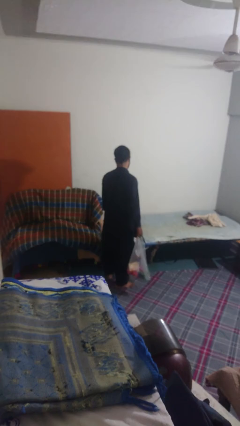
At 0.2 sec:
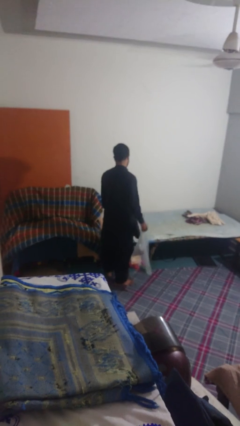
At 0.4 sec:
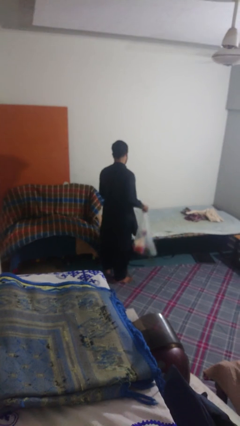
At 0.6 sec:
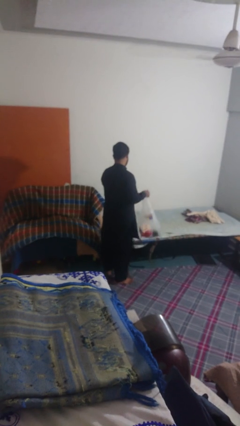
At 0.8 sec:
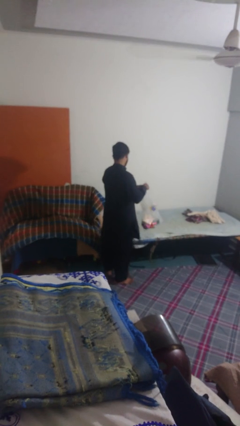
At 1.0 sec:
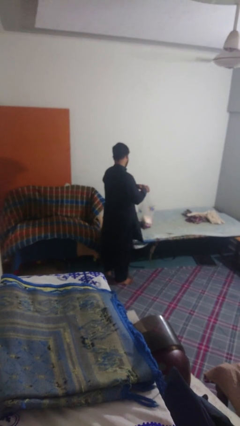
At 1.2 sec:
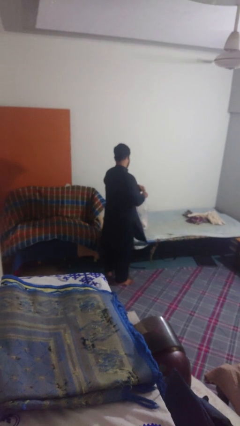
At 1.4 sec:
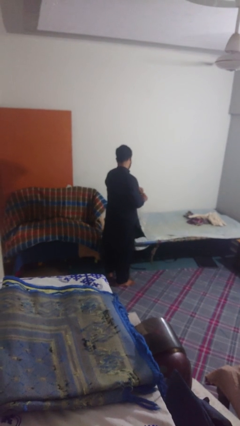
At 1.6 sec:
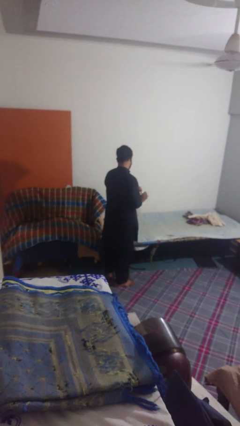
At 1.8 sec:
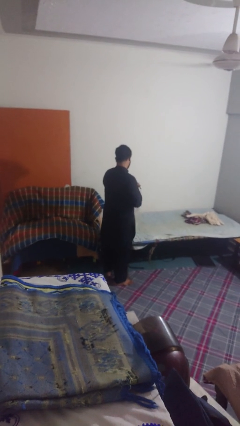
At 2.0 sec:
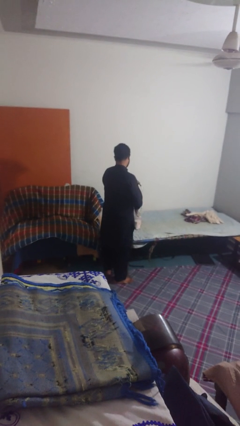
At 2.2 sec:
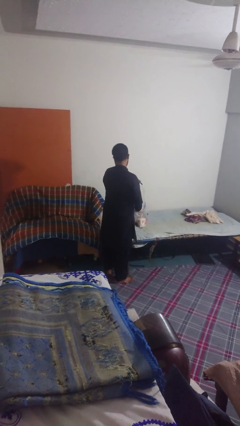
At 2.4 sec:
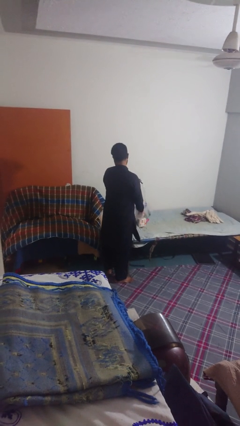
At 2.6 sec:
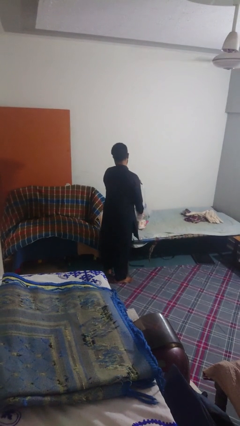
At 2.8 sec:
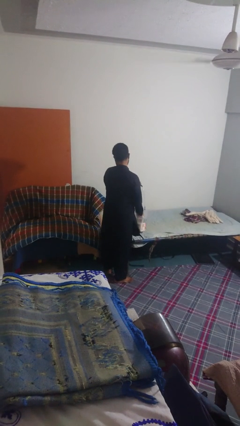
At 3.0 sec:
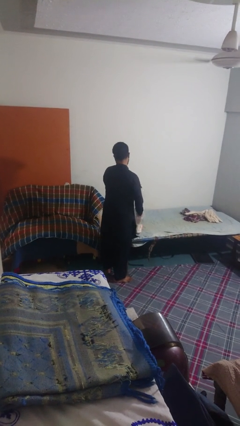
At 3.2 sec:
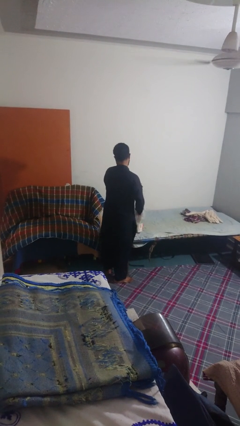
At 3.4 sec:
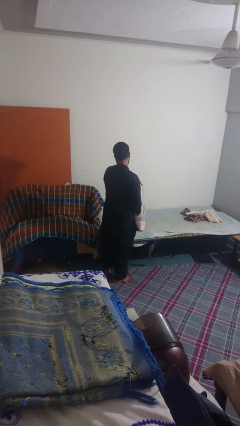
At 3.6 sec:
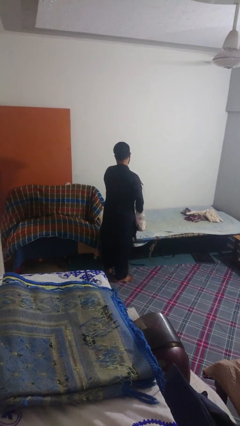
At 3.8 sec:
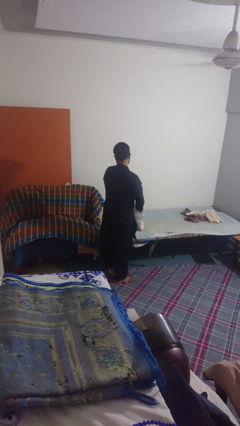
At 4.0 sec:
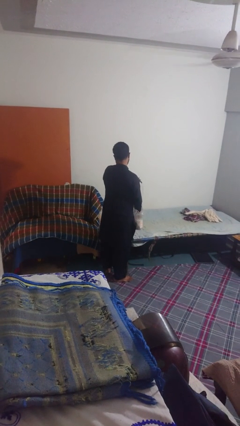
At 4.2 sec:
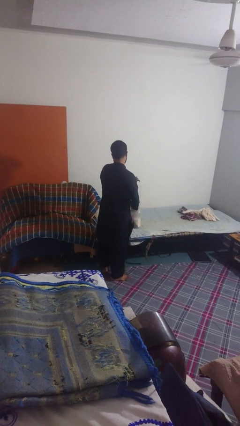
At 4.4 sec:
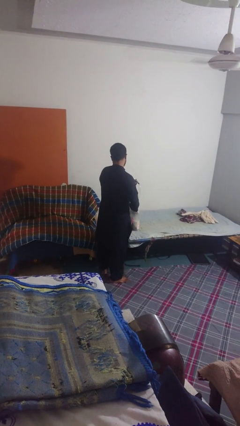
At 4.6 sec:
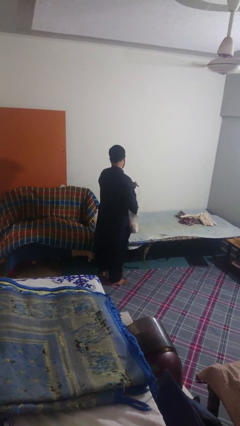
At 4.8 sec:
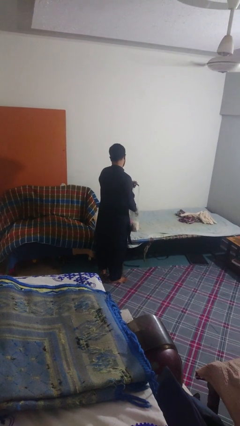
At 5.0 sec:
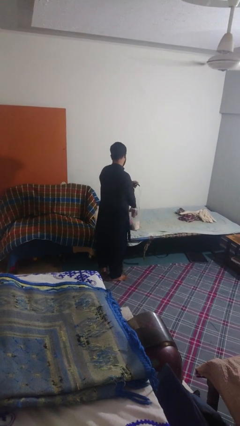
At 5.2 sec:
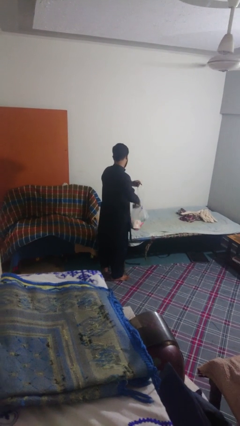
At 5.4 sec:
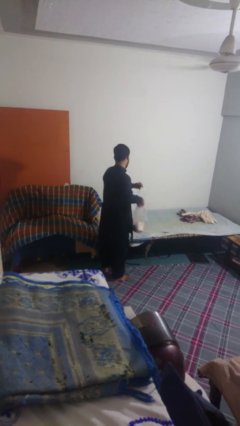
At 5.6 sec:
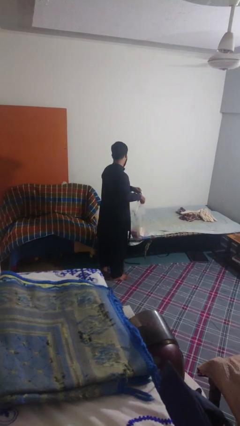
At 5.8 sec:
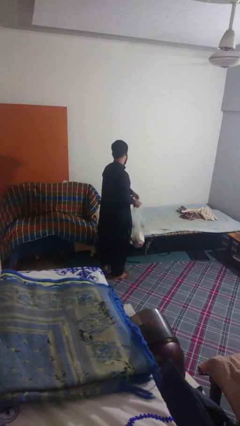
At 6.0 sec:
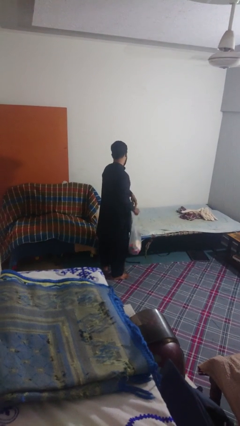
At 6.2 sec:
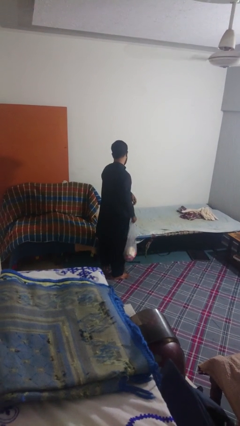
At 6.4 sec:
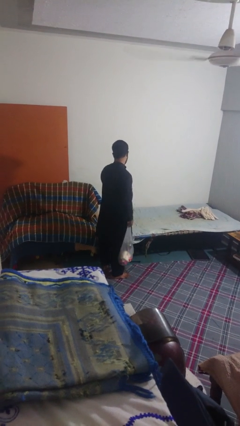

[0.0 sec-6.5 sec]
person searches in bag

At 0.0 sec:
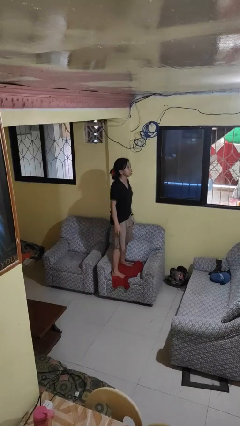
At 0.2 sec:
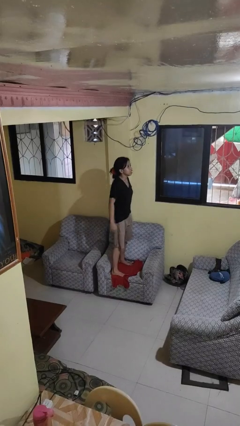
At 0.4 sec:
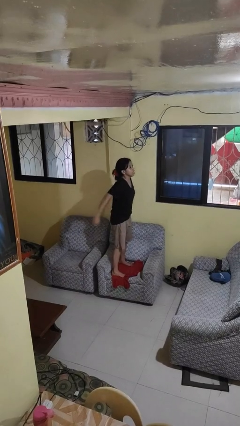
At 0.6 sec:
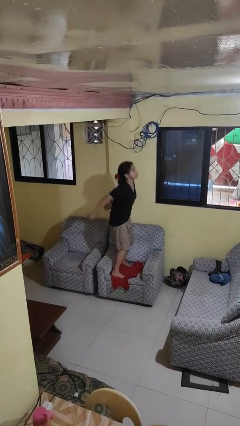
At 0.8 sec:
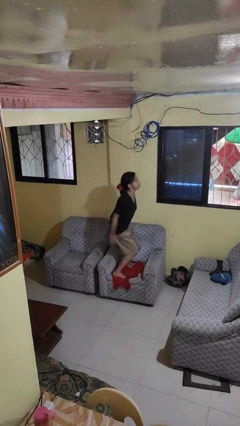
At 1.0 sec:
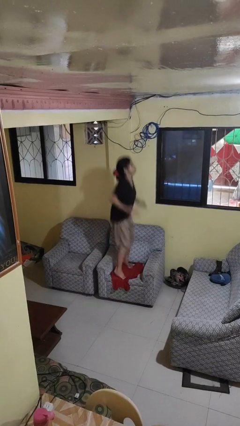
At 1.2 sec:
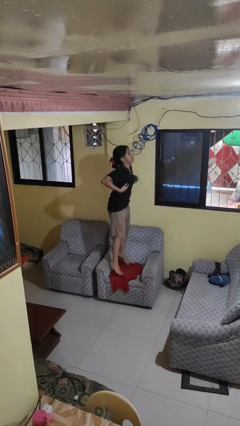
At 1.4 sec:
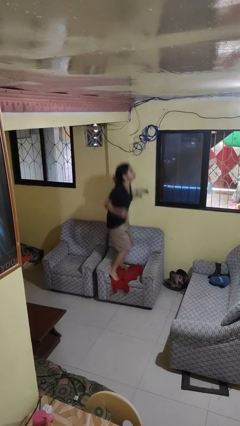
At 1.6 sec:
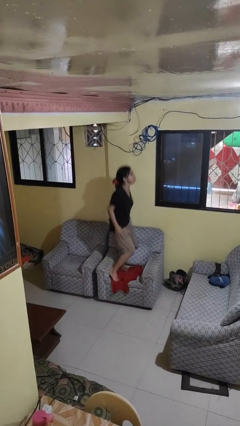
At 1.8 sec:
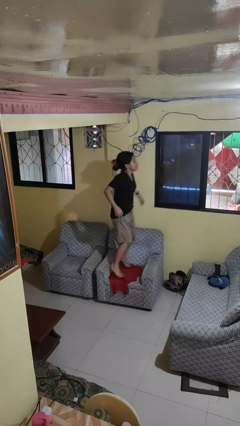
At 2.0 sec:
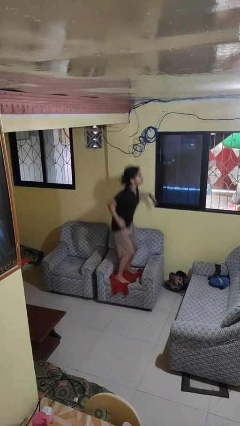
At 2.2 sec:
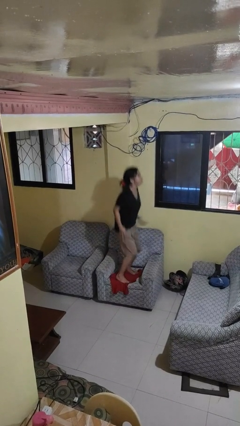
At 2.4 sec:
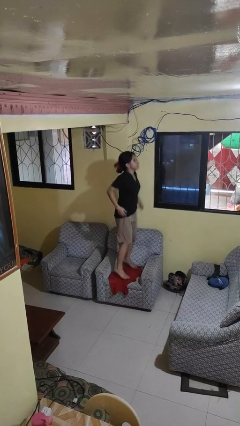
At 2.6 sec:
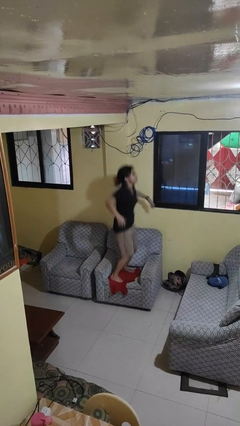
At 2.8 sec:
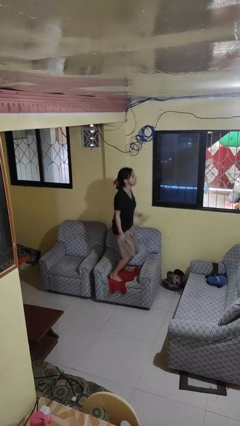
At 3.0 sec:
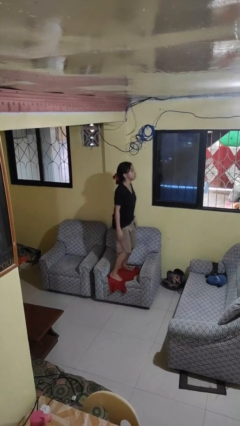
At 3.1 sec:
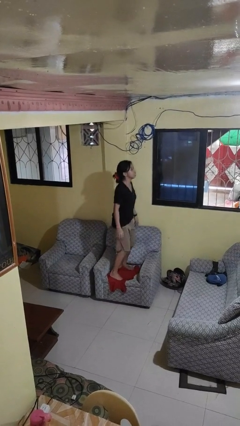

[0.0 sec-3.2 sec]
person jumps on couch

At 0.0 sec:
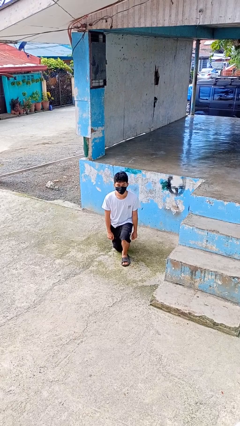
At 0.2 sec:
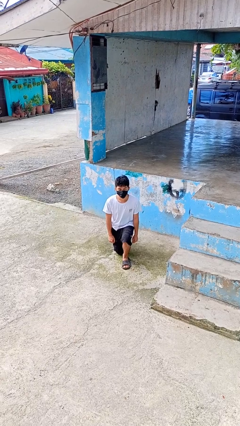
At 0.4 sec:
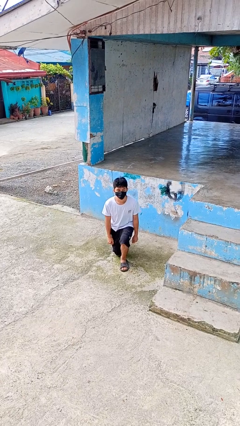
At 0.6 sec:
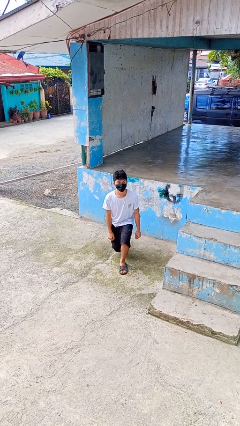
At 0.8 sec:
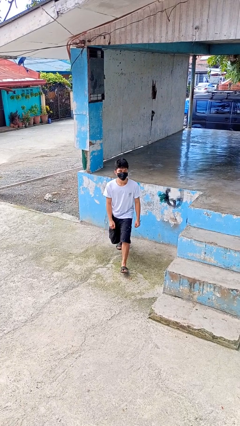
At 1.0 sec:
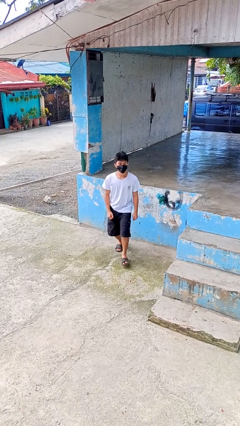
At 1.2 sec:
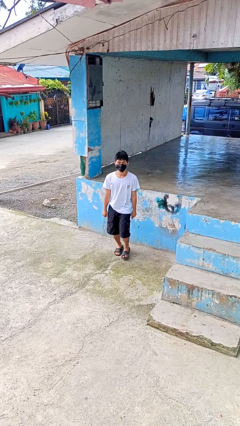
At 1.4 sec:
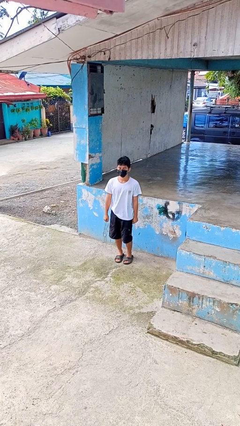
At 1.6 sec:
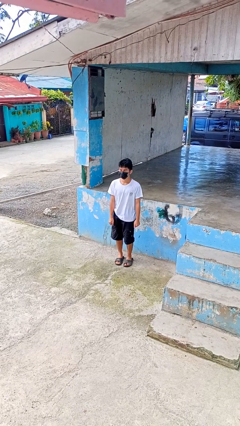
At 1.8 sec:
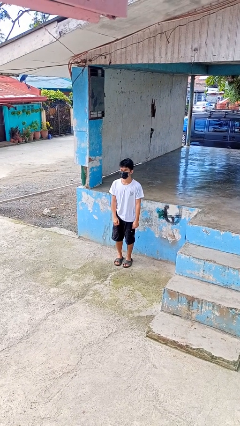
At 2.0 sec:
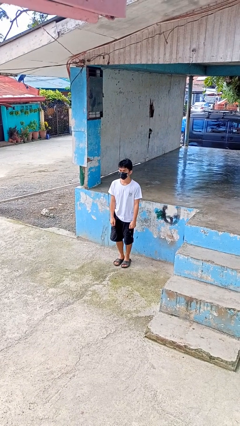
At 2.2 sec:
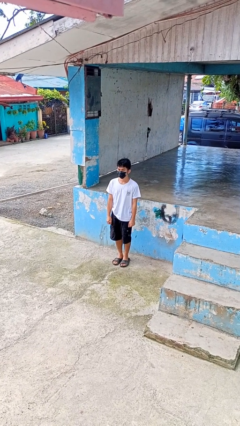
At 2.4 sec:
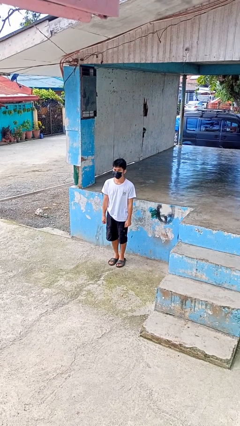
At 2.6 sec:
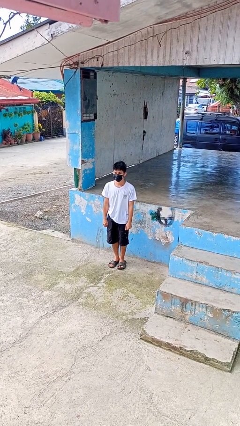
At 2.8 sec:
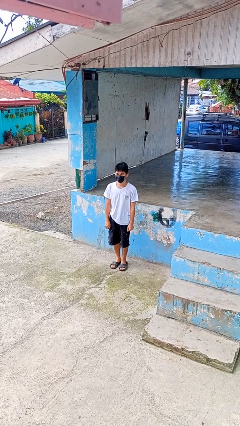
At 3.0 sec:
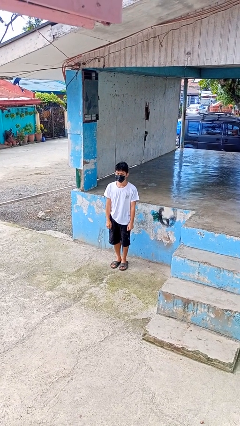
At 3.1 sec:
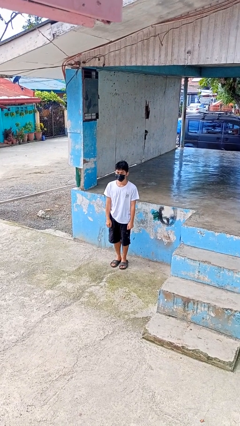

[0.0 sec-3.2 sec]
person stands up from floor

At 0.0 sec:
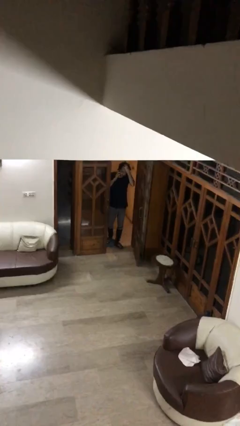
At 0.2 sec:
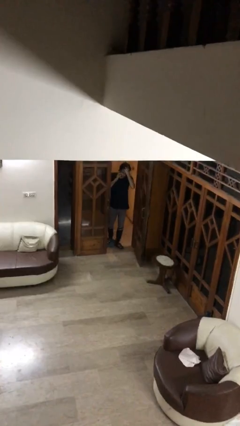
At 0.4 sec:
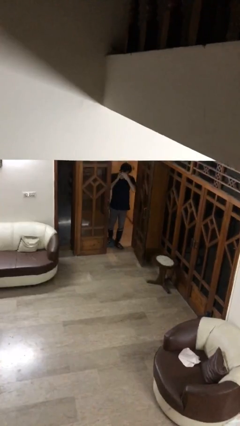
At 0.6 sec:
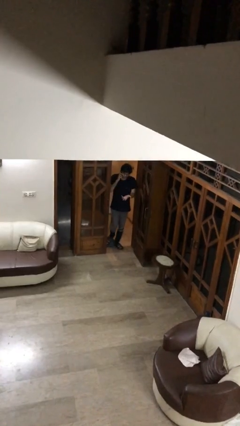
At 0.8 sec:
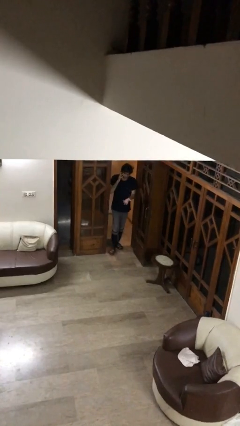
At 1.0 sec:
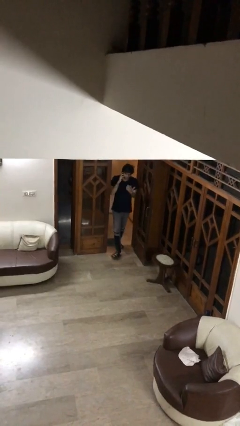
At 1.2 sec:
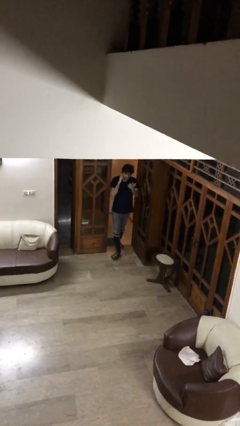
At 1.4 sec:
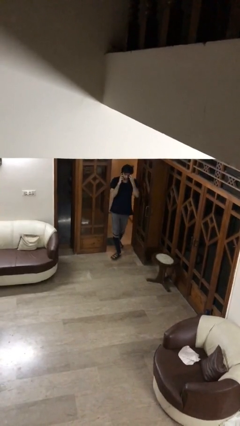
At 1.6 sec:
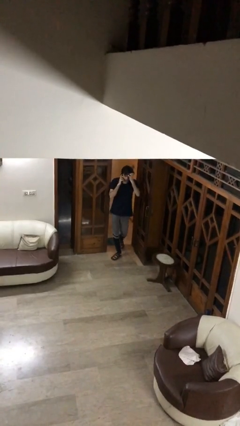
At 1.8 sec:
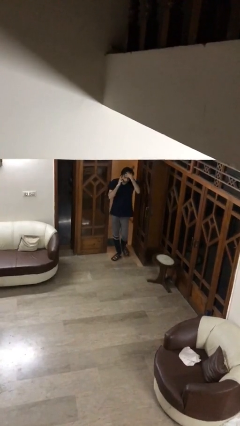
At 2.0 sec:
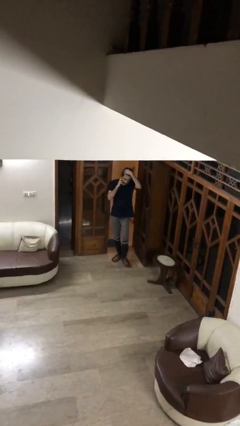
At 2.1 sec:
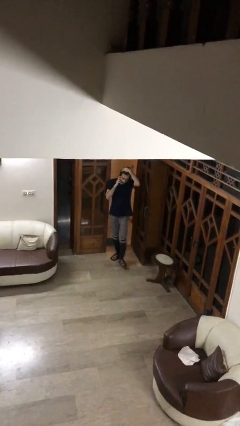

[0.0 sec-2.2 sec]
person enters scene through structure

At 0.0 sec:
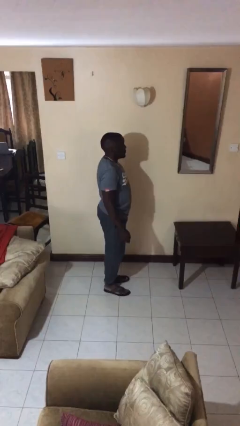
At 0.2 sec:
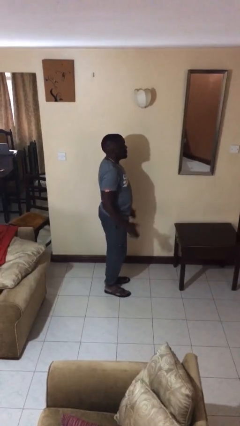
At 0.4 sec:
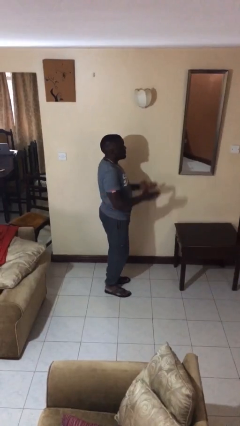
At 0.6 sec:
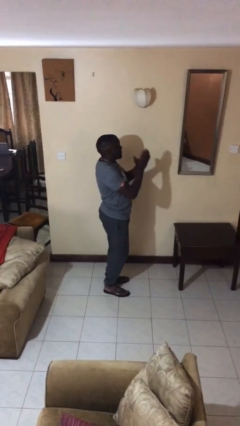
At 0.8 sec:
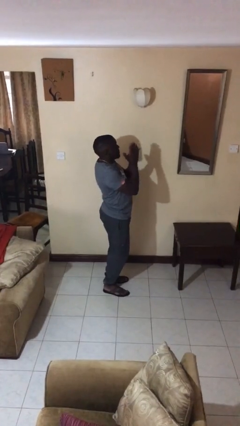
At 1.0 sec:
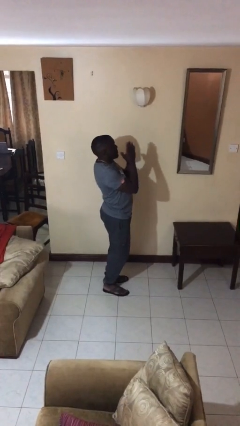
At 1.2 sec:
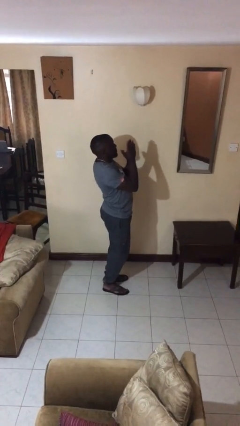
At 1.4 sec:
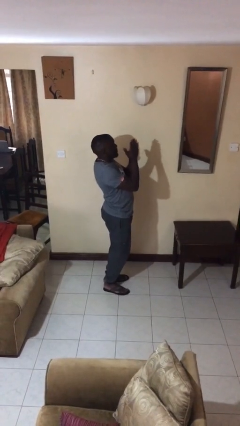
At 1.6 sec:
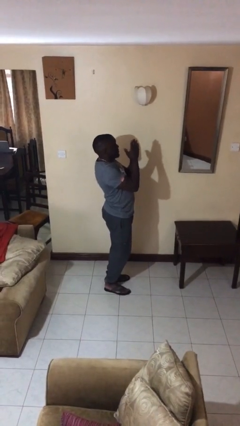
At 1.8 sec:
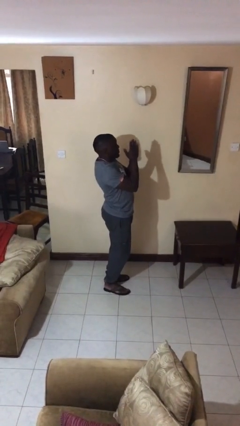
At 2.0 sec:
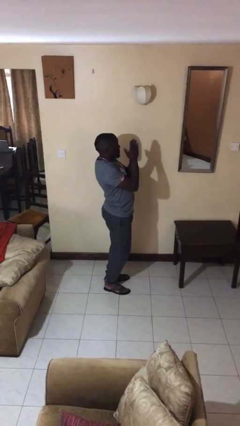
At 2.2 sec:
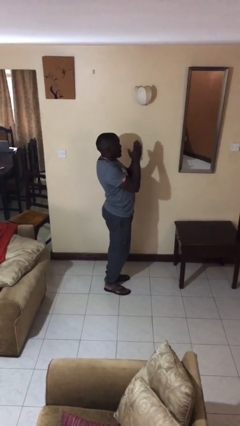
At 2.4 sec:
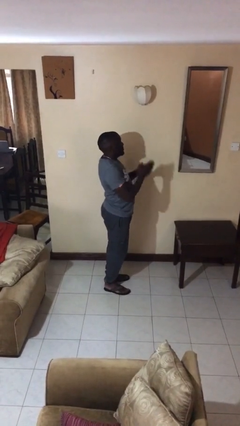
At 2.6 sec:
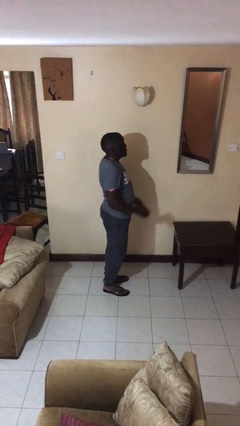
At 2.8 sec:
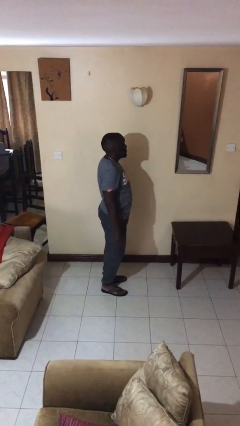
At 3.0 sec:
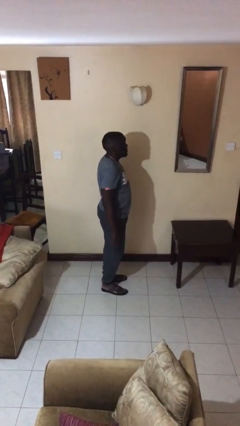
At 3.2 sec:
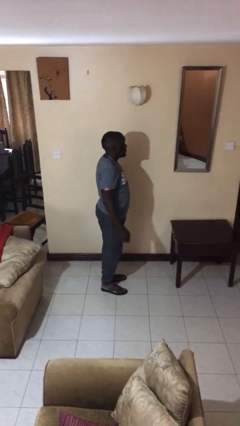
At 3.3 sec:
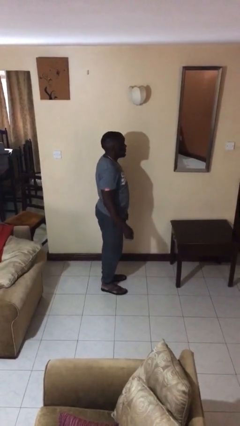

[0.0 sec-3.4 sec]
person prays
